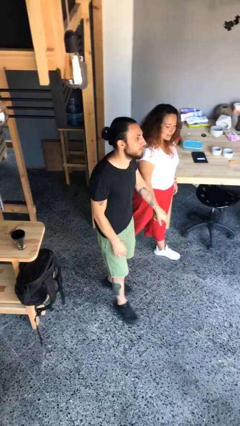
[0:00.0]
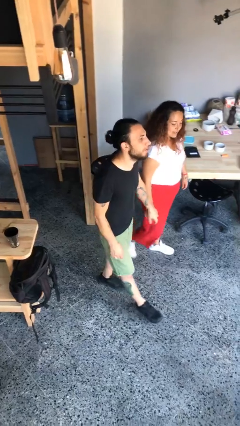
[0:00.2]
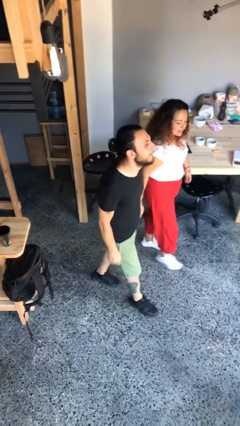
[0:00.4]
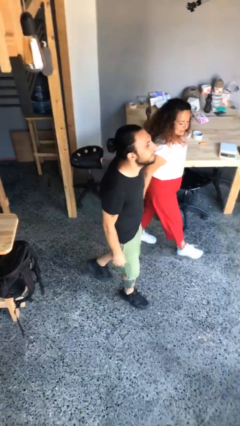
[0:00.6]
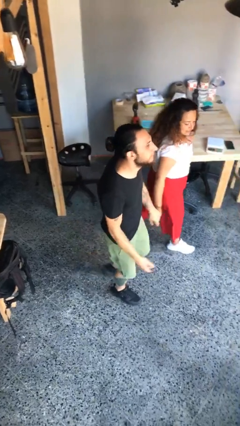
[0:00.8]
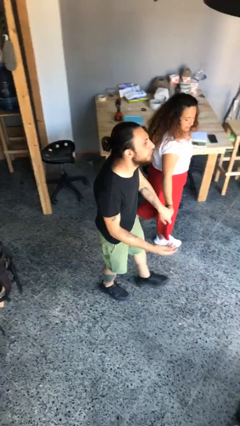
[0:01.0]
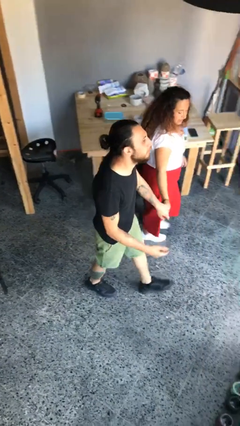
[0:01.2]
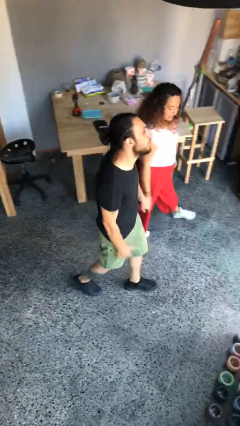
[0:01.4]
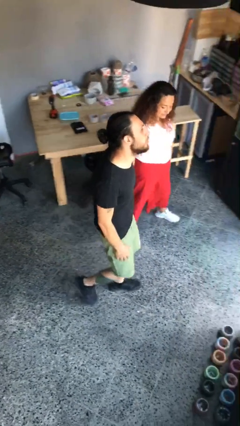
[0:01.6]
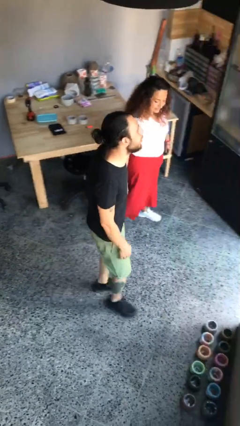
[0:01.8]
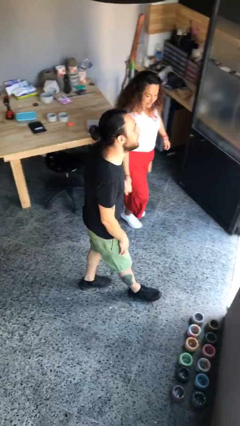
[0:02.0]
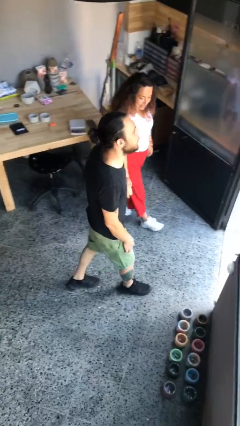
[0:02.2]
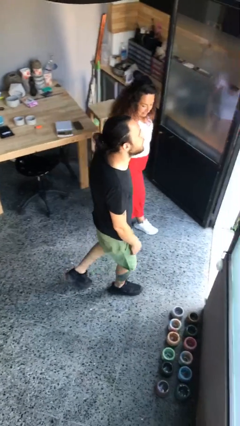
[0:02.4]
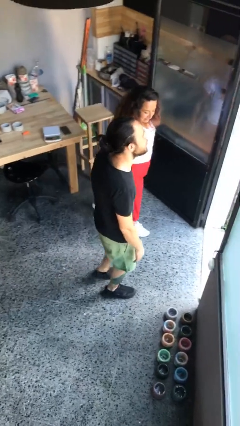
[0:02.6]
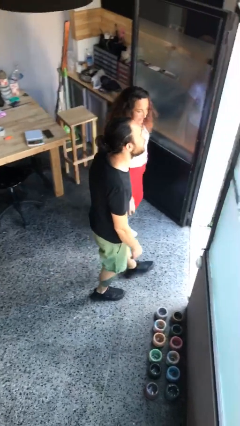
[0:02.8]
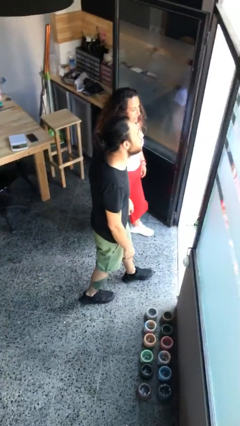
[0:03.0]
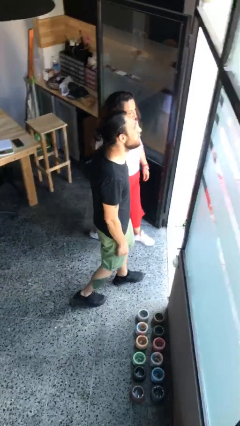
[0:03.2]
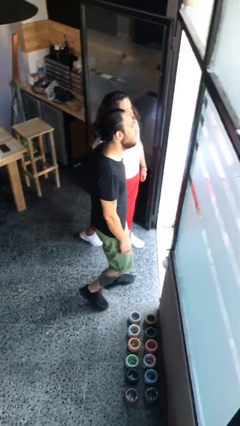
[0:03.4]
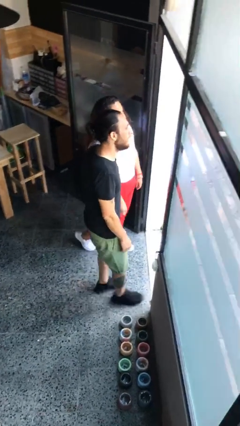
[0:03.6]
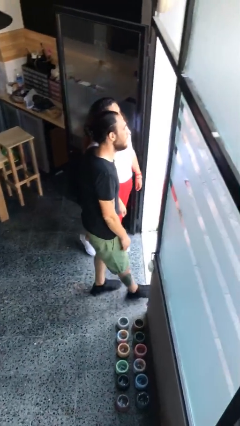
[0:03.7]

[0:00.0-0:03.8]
person holds hand

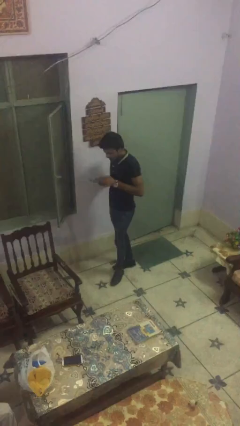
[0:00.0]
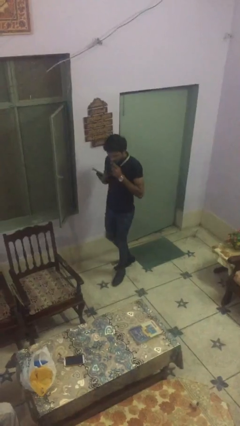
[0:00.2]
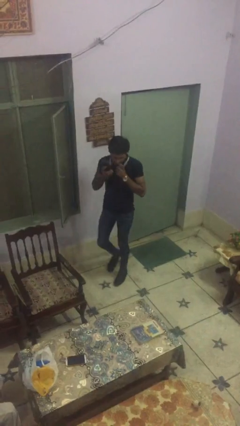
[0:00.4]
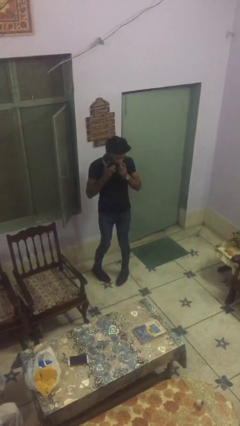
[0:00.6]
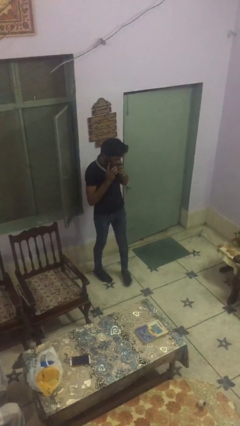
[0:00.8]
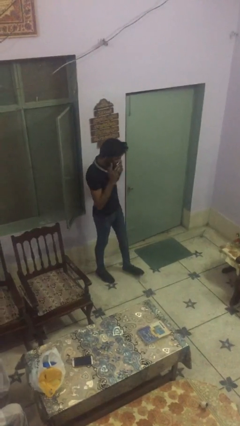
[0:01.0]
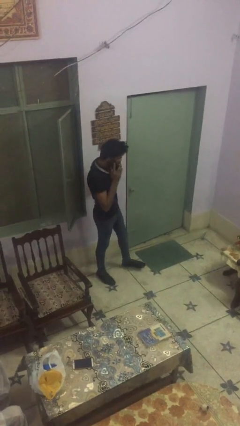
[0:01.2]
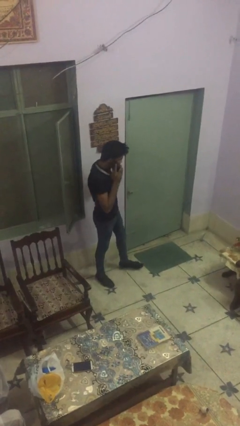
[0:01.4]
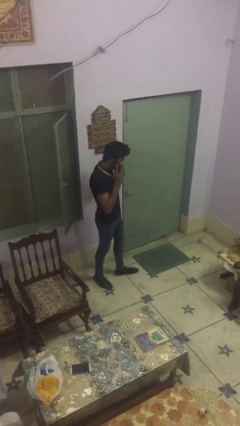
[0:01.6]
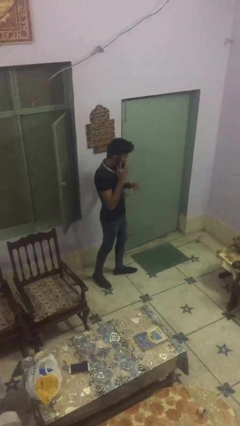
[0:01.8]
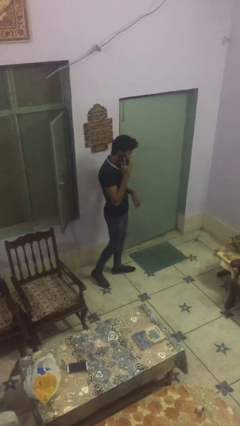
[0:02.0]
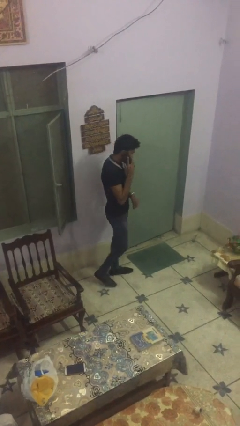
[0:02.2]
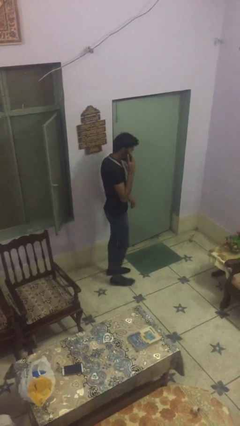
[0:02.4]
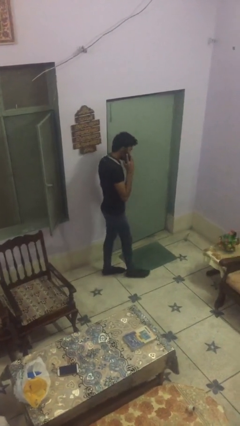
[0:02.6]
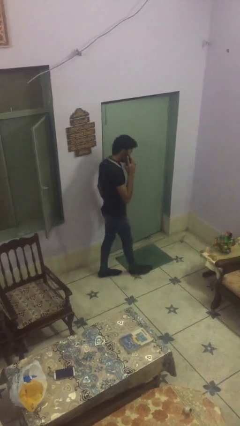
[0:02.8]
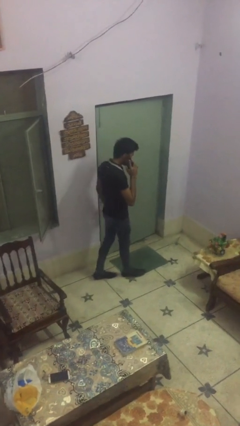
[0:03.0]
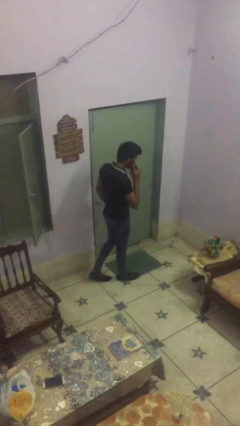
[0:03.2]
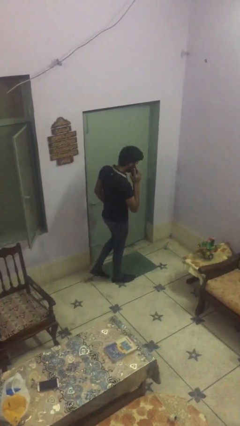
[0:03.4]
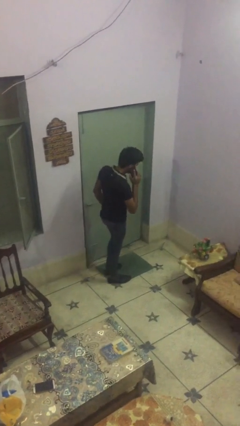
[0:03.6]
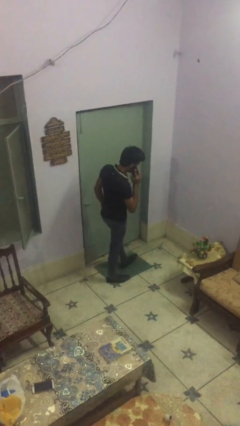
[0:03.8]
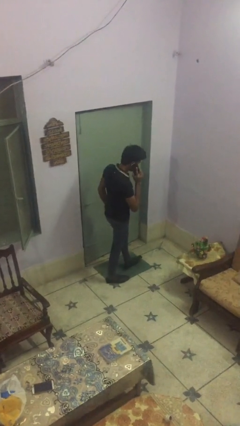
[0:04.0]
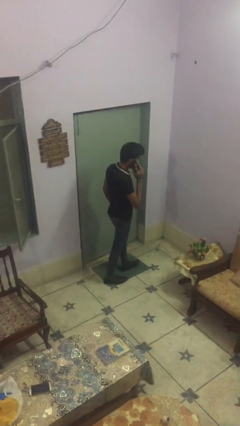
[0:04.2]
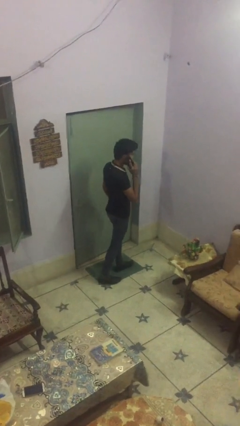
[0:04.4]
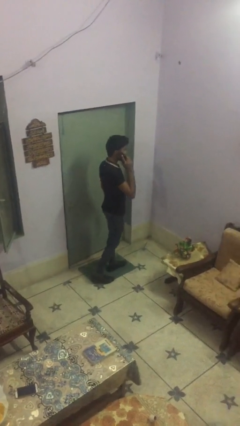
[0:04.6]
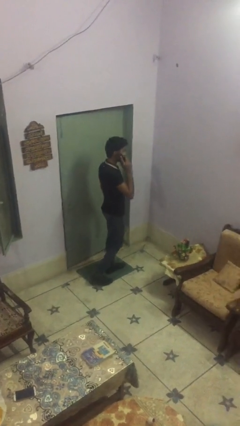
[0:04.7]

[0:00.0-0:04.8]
person talks on phone

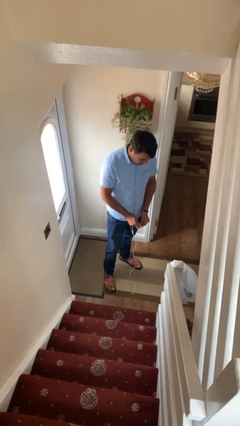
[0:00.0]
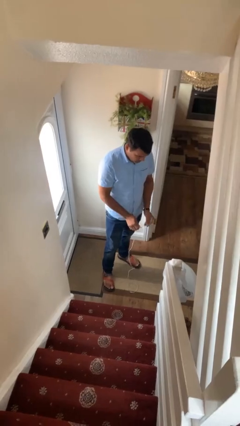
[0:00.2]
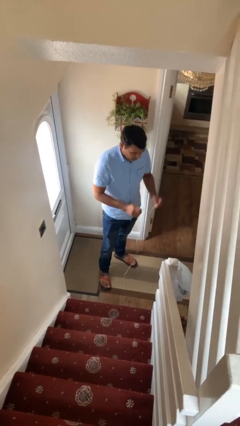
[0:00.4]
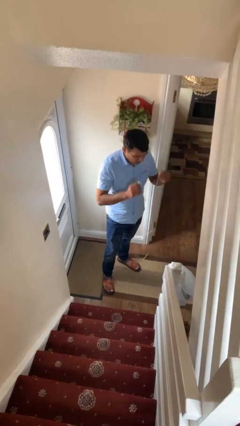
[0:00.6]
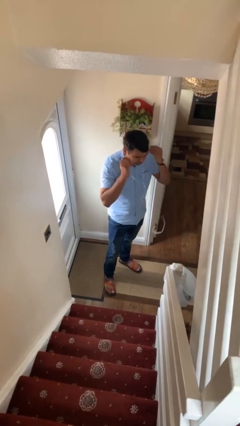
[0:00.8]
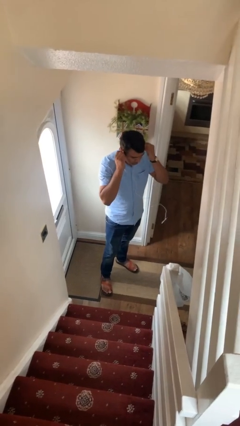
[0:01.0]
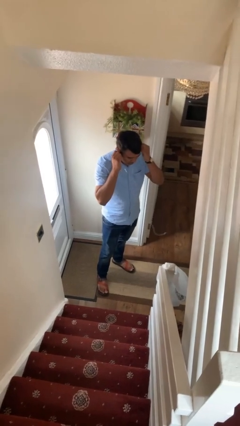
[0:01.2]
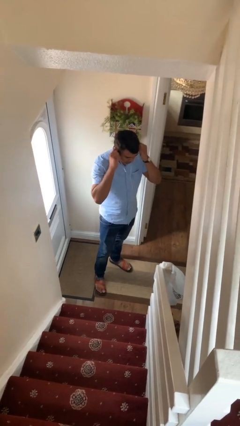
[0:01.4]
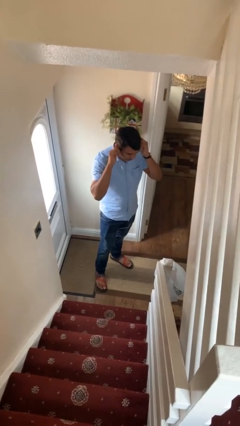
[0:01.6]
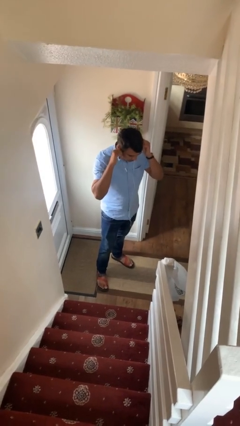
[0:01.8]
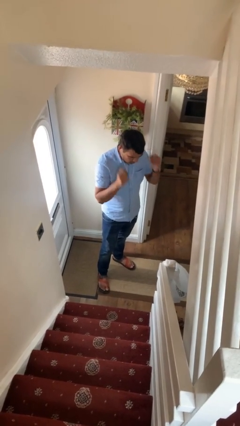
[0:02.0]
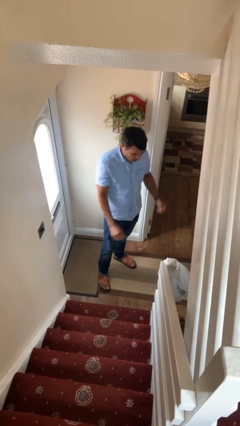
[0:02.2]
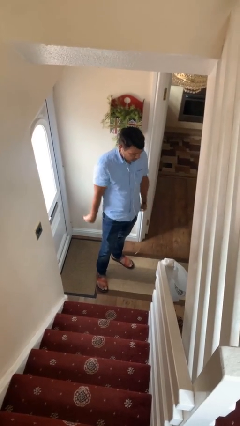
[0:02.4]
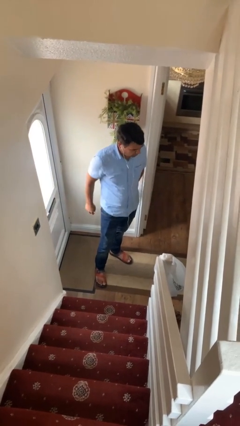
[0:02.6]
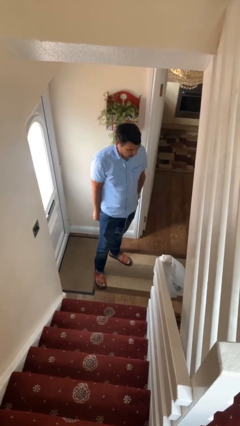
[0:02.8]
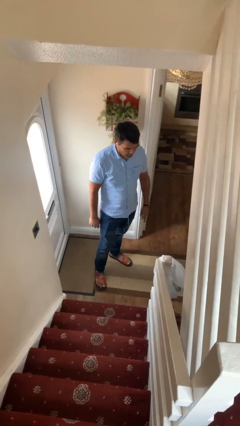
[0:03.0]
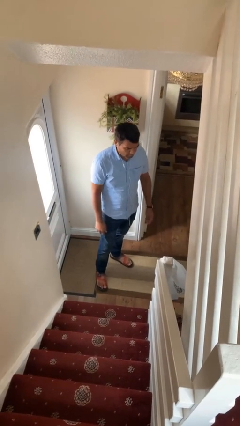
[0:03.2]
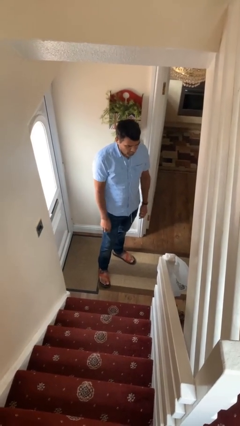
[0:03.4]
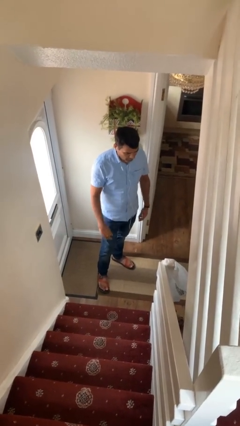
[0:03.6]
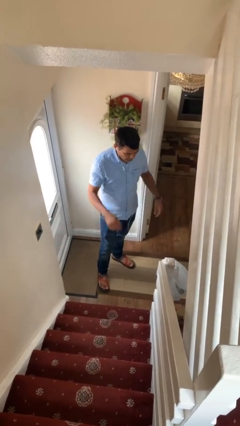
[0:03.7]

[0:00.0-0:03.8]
person puts on headphones

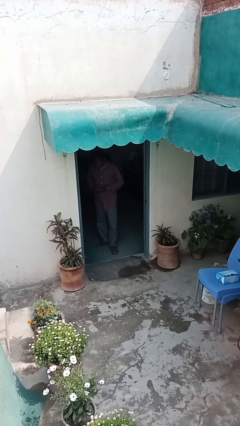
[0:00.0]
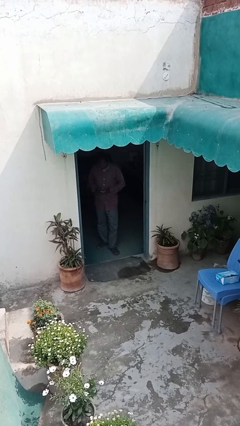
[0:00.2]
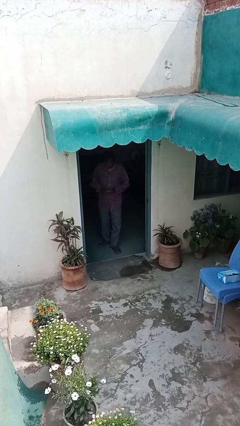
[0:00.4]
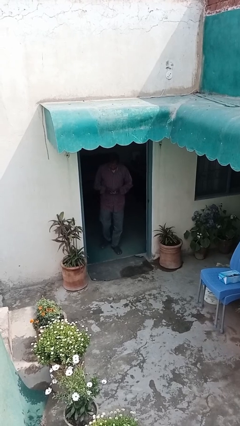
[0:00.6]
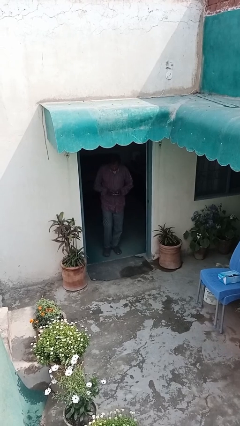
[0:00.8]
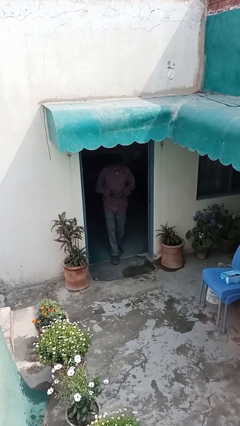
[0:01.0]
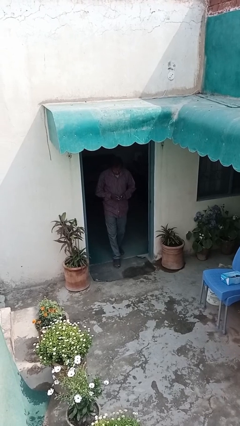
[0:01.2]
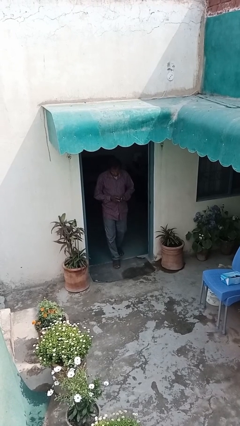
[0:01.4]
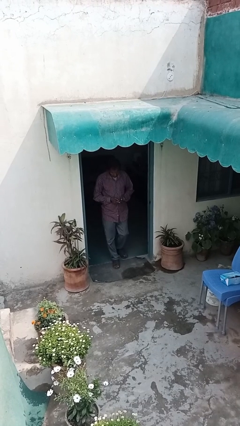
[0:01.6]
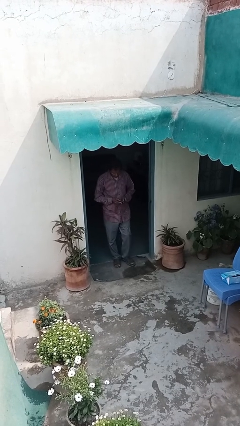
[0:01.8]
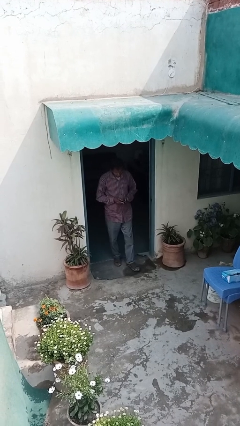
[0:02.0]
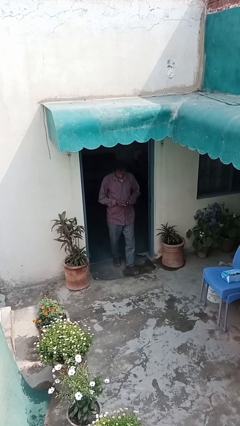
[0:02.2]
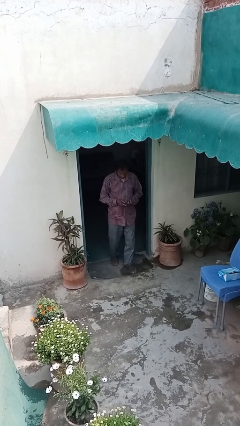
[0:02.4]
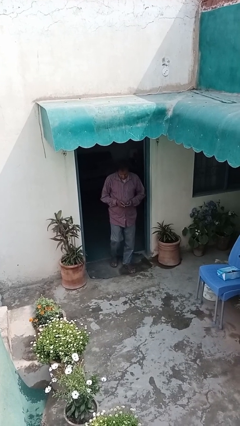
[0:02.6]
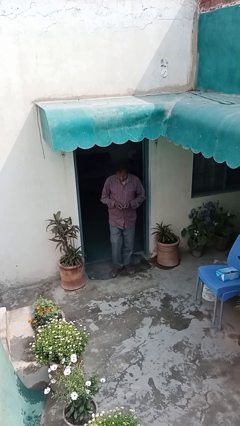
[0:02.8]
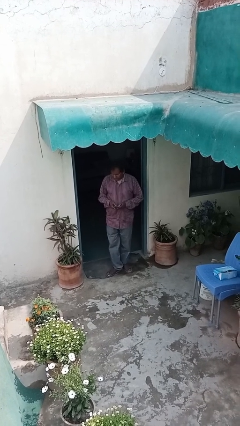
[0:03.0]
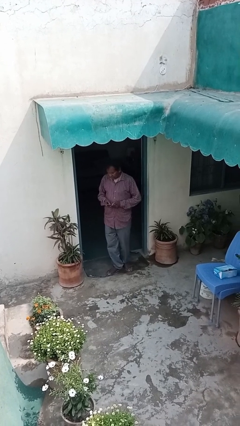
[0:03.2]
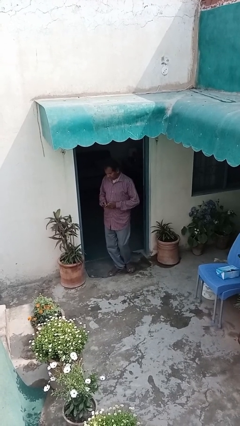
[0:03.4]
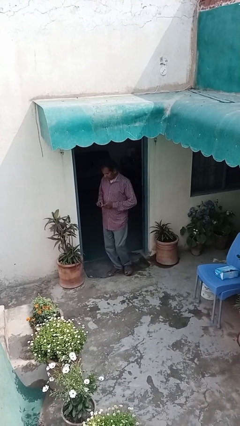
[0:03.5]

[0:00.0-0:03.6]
person enters scene through structure

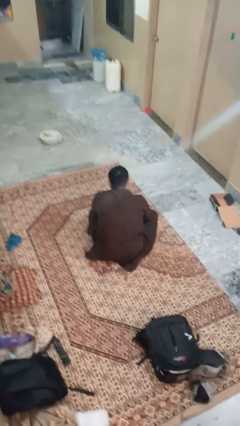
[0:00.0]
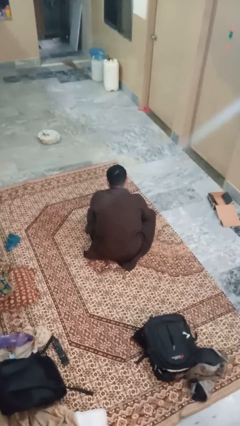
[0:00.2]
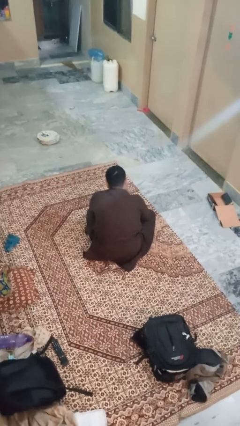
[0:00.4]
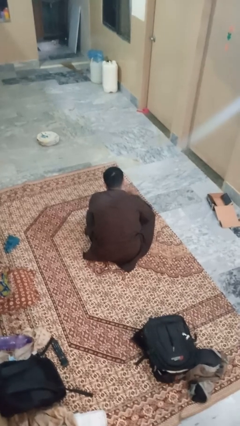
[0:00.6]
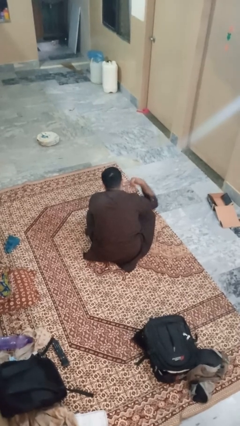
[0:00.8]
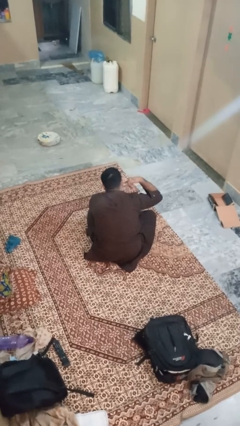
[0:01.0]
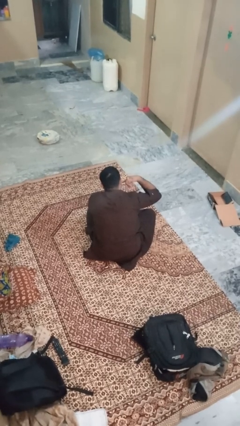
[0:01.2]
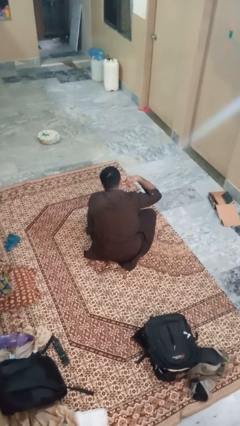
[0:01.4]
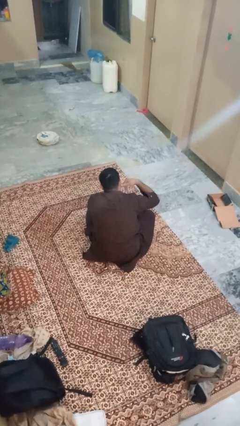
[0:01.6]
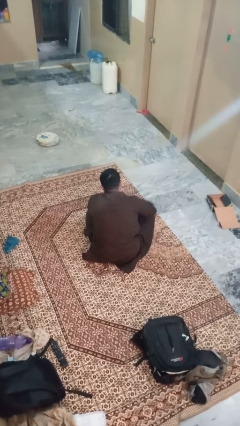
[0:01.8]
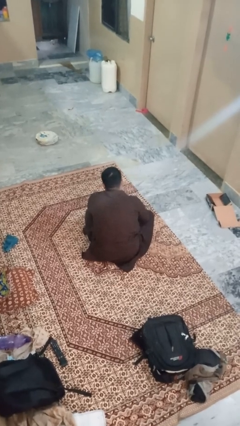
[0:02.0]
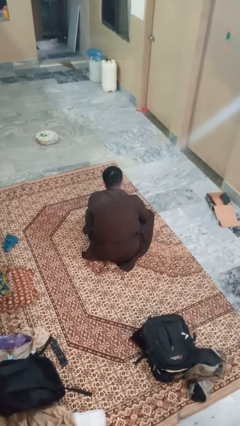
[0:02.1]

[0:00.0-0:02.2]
person gestures call me
